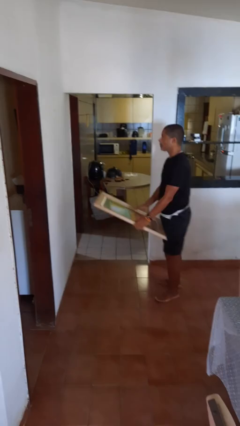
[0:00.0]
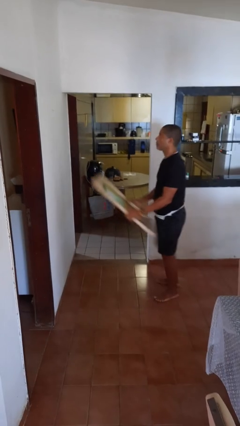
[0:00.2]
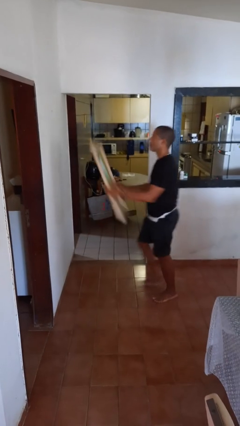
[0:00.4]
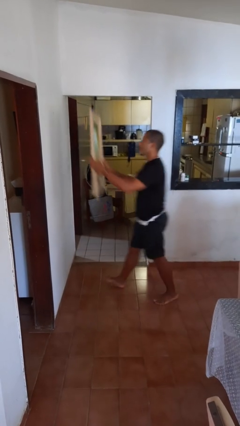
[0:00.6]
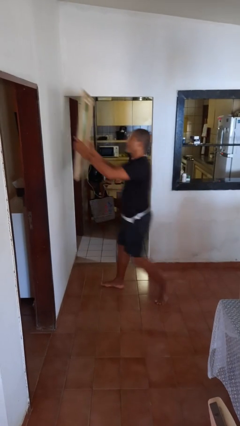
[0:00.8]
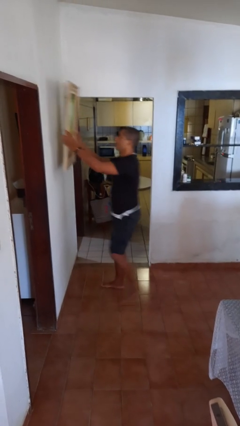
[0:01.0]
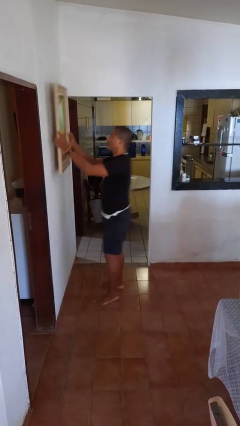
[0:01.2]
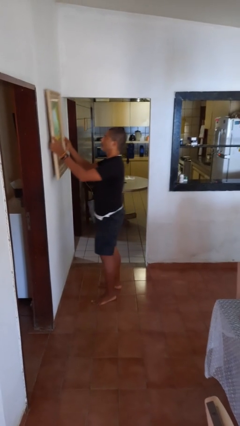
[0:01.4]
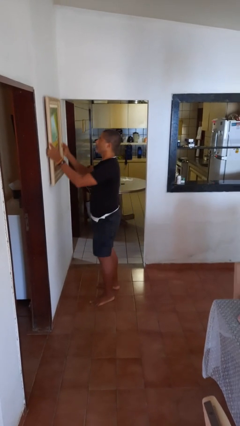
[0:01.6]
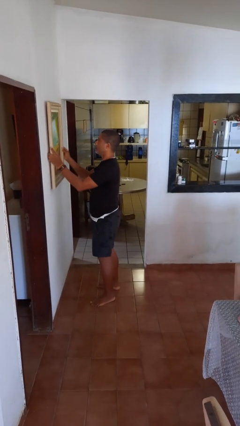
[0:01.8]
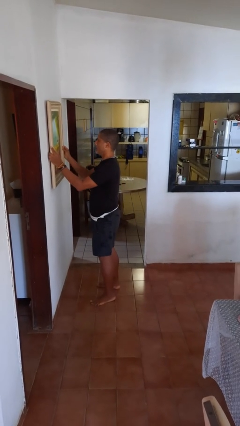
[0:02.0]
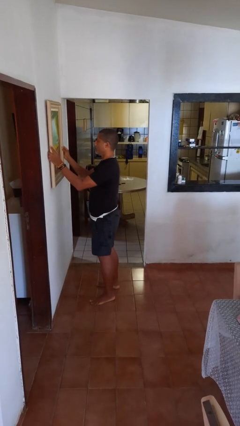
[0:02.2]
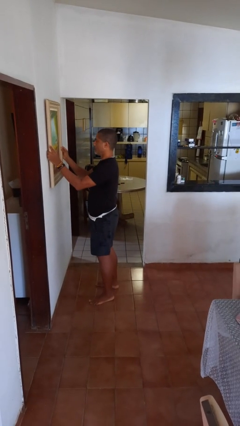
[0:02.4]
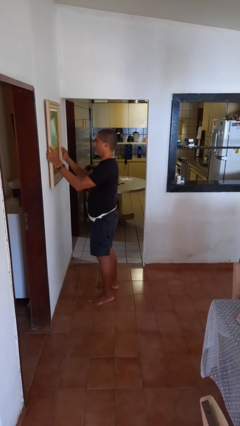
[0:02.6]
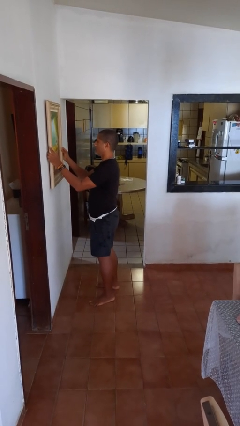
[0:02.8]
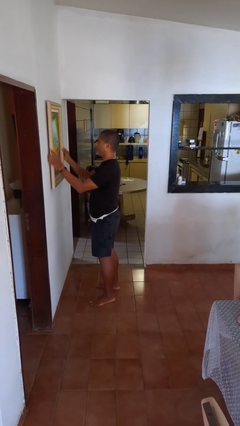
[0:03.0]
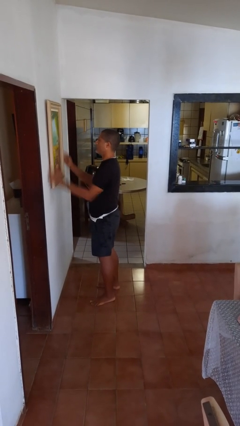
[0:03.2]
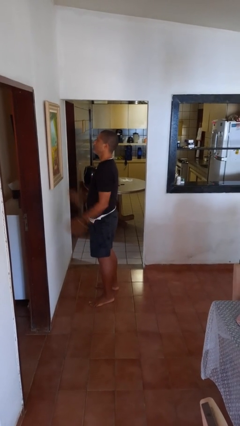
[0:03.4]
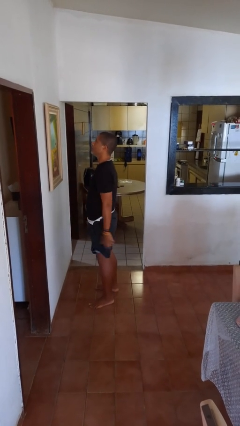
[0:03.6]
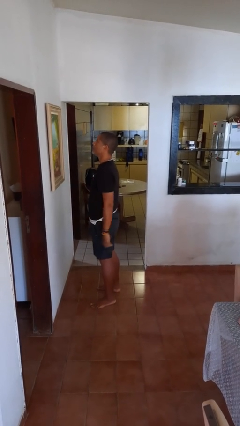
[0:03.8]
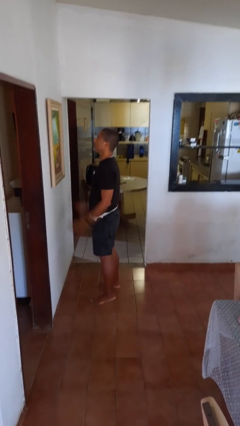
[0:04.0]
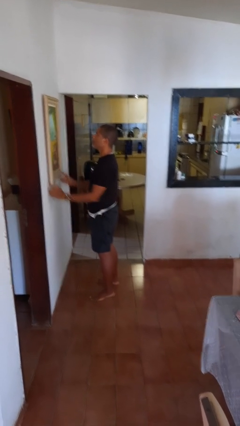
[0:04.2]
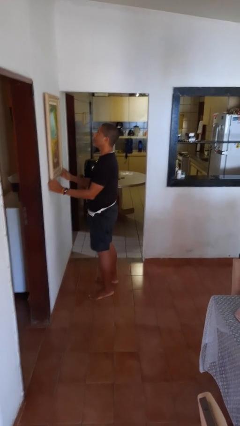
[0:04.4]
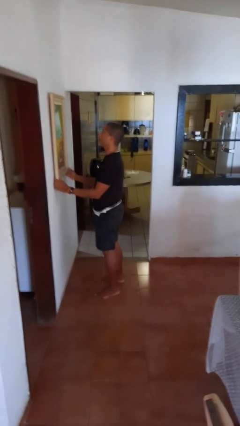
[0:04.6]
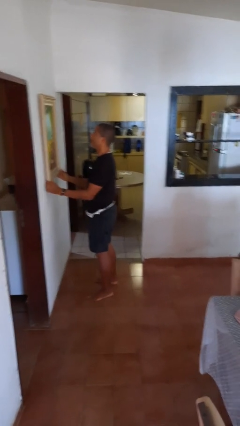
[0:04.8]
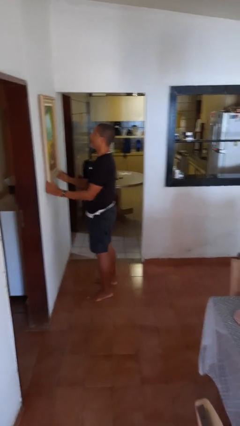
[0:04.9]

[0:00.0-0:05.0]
person puts up picture frame

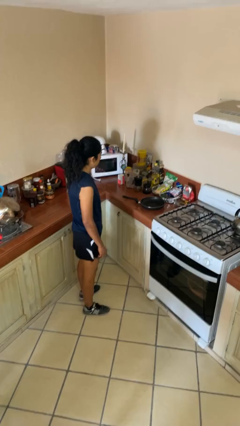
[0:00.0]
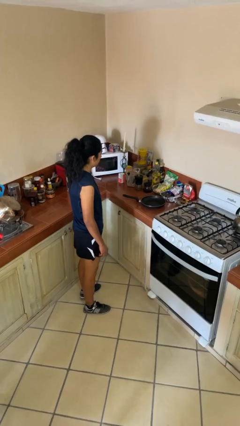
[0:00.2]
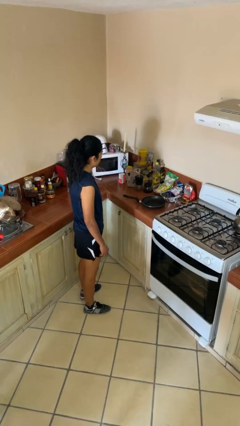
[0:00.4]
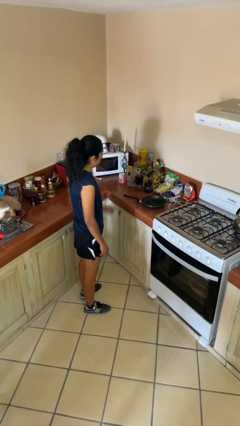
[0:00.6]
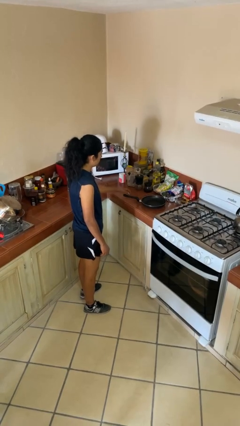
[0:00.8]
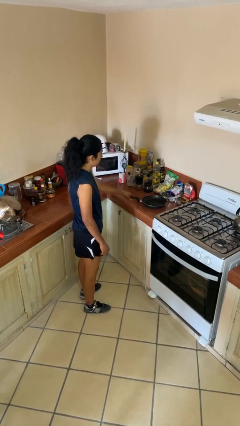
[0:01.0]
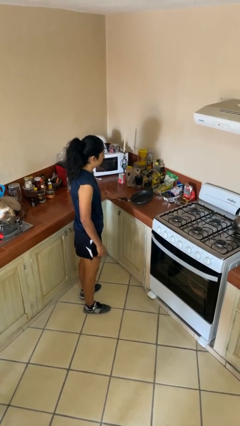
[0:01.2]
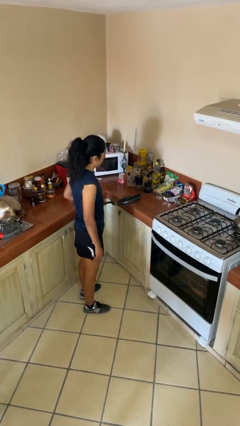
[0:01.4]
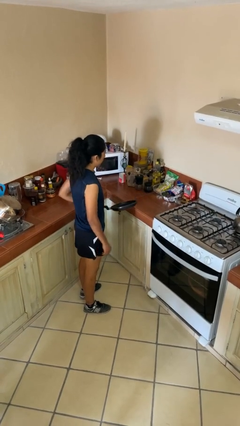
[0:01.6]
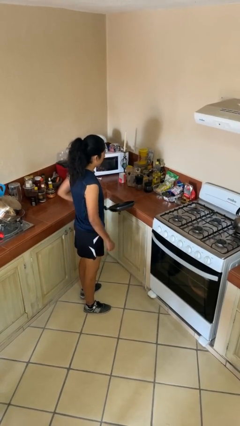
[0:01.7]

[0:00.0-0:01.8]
person picks up object from countertop

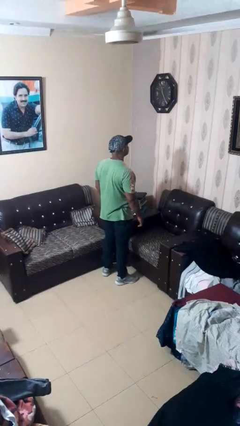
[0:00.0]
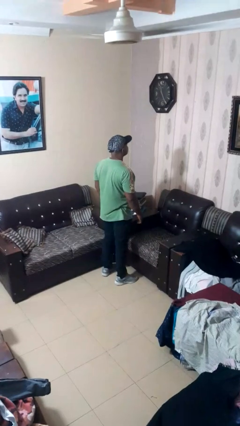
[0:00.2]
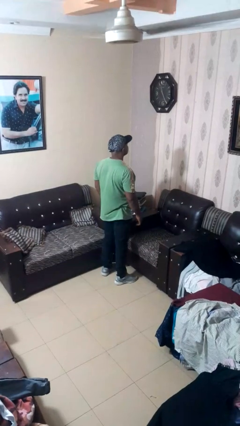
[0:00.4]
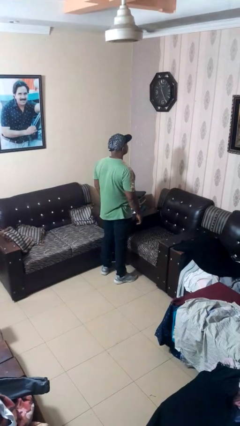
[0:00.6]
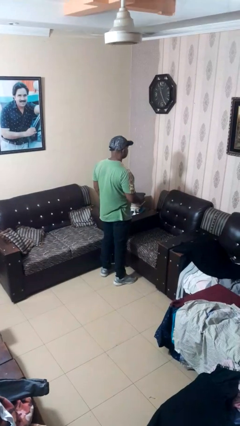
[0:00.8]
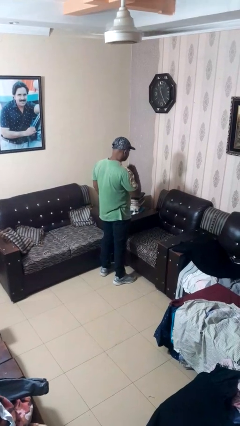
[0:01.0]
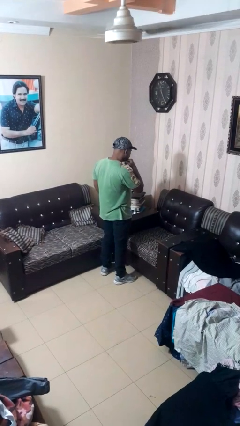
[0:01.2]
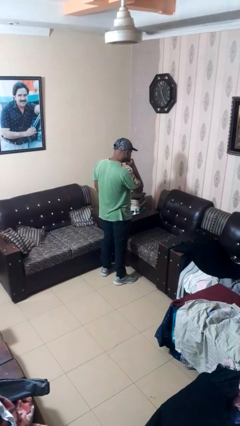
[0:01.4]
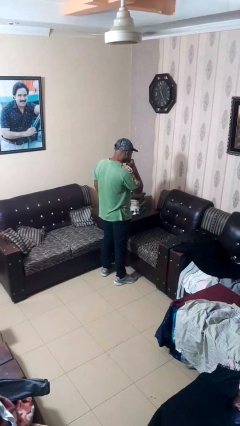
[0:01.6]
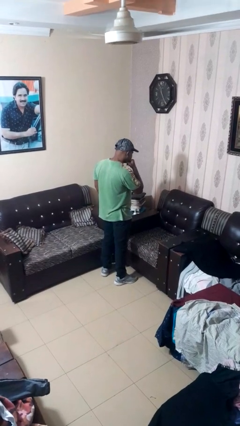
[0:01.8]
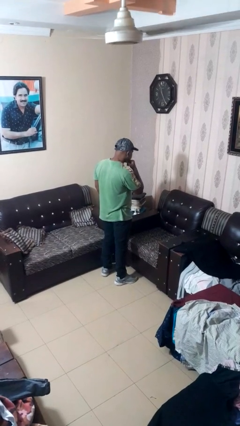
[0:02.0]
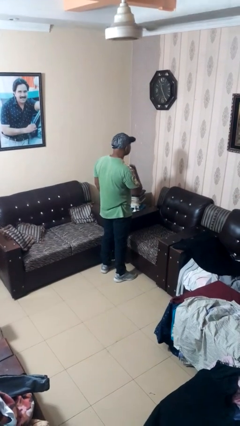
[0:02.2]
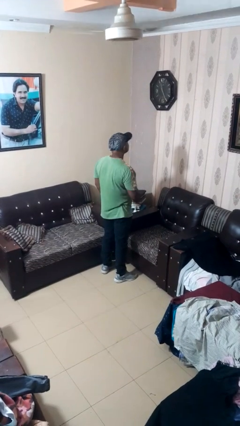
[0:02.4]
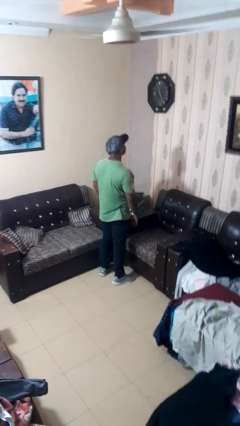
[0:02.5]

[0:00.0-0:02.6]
person strokes chin

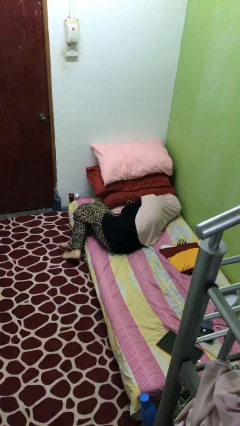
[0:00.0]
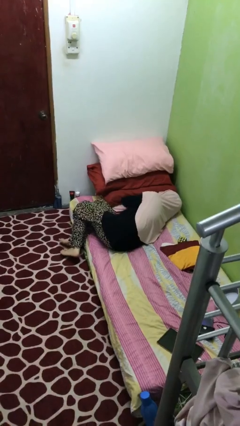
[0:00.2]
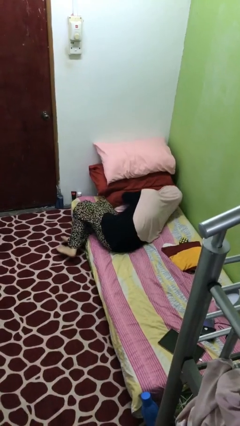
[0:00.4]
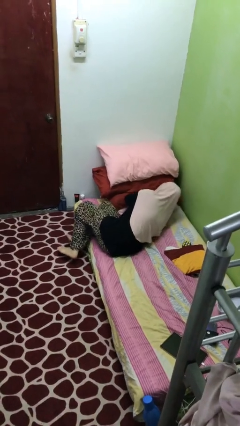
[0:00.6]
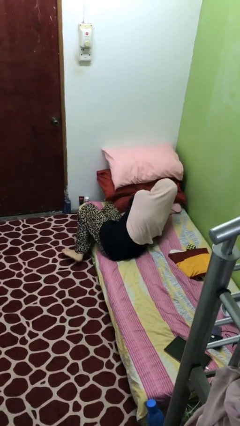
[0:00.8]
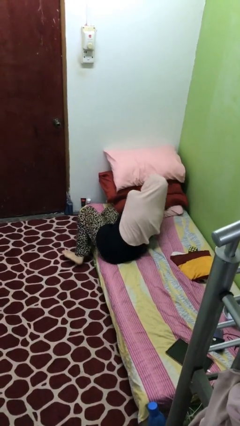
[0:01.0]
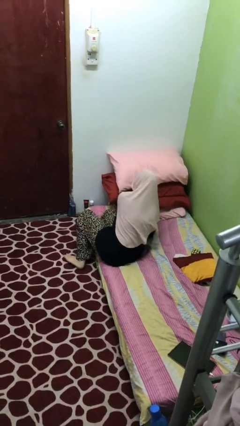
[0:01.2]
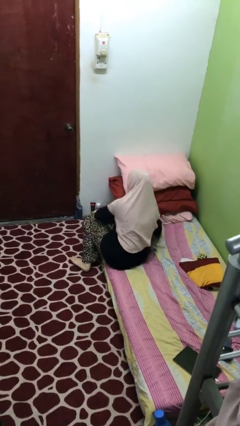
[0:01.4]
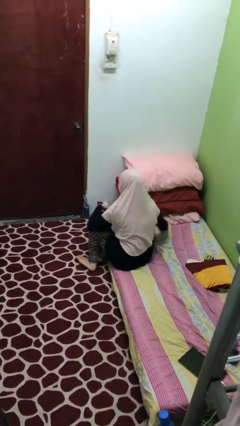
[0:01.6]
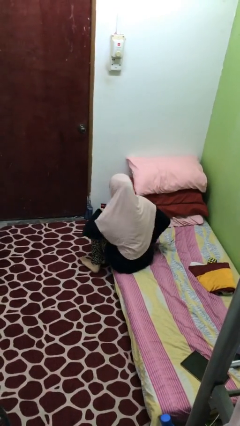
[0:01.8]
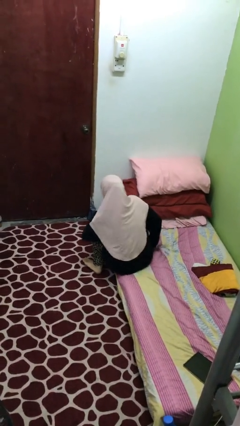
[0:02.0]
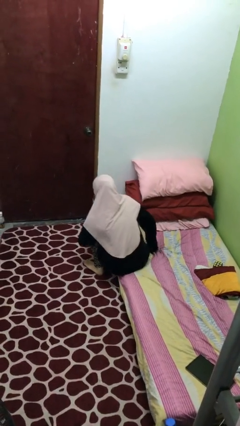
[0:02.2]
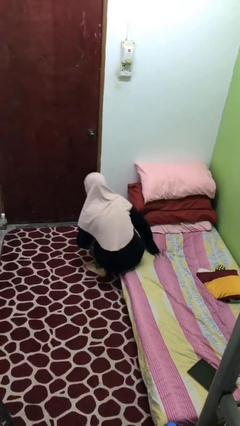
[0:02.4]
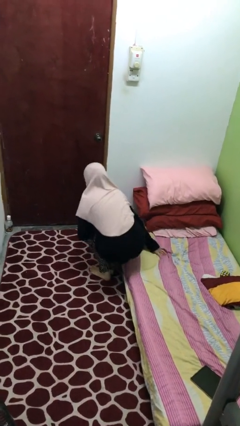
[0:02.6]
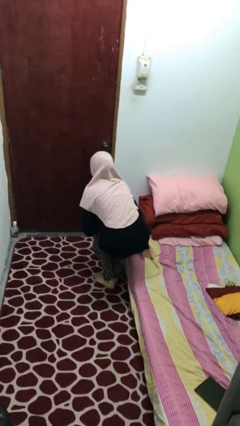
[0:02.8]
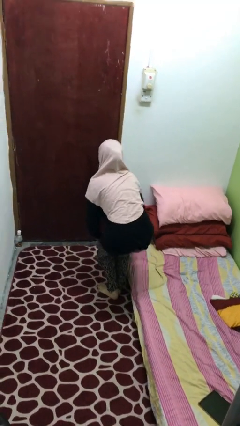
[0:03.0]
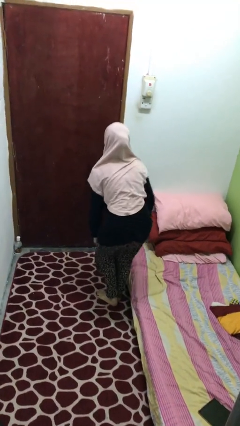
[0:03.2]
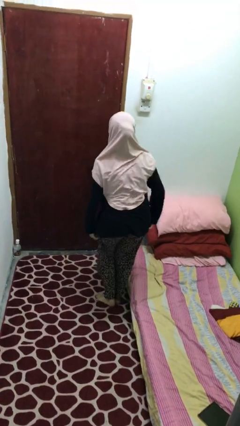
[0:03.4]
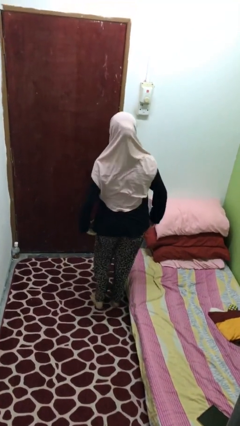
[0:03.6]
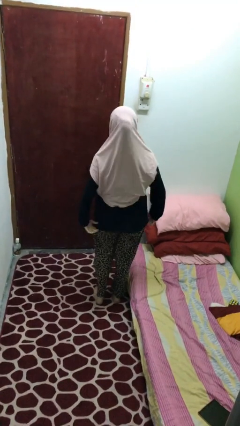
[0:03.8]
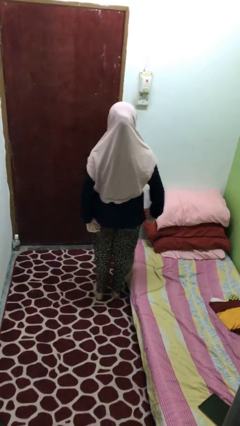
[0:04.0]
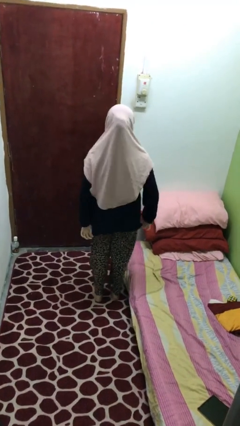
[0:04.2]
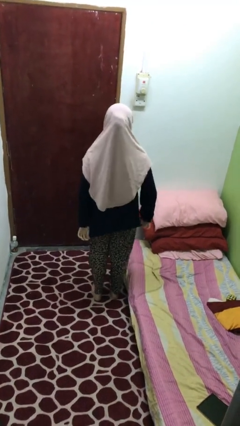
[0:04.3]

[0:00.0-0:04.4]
person stands up

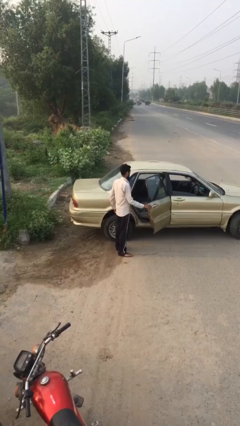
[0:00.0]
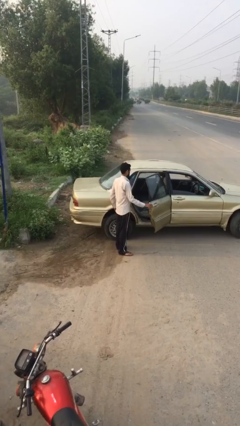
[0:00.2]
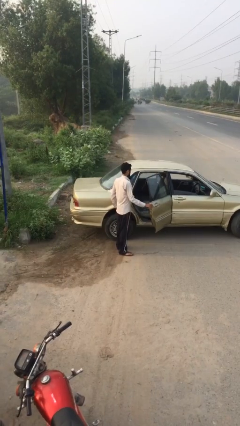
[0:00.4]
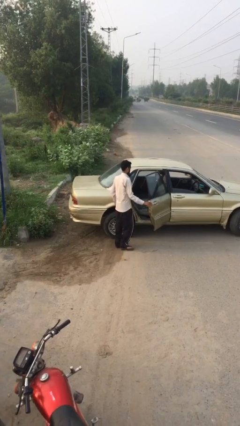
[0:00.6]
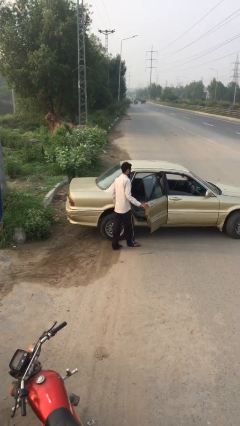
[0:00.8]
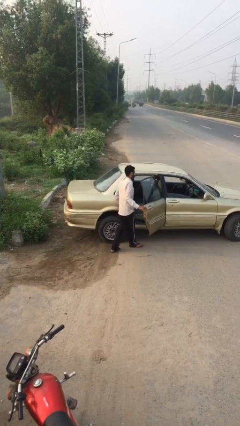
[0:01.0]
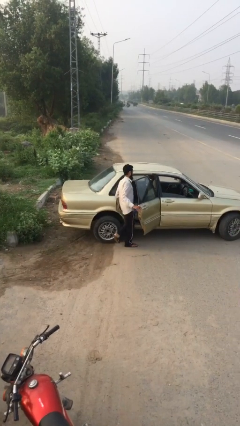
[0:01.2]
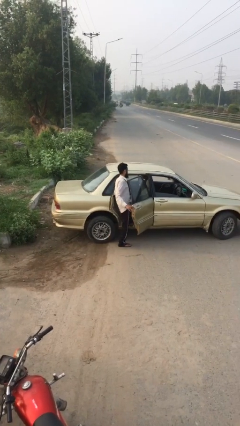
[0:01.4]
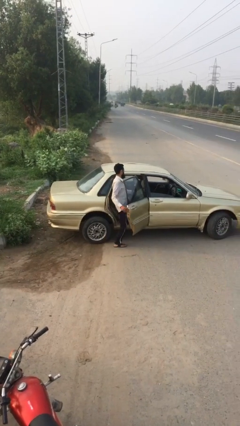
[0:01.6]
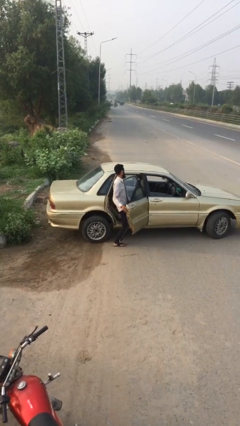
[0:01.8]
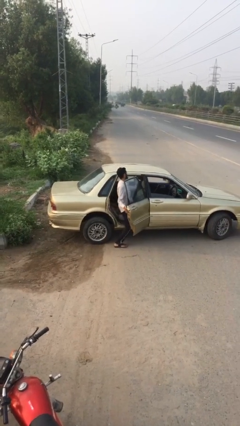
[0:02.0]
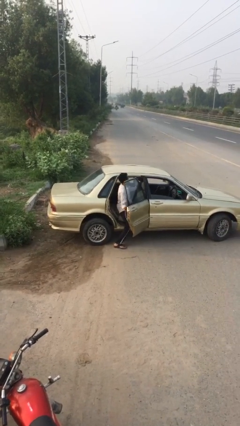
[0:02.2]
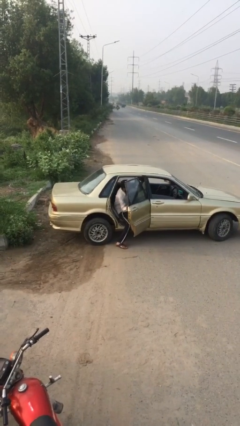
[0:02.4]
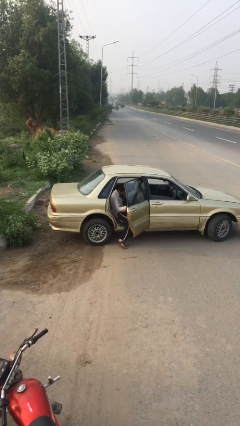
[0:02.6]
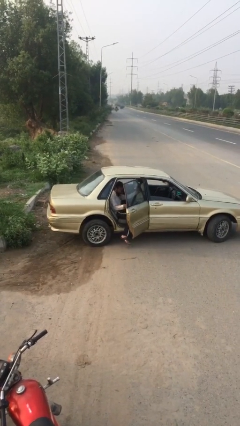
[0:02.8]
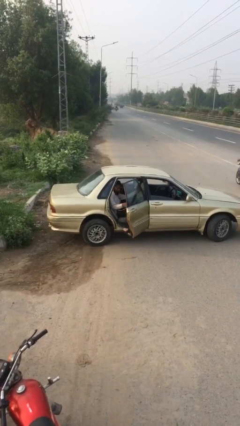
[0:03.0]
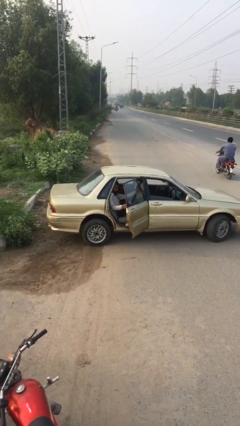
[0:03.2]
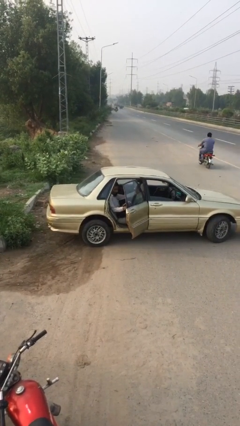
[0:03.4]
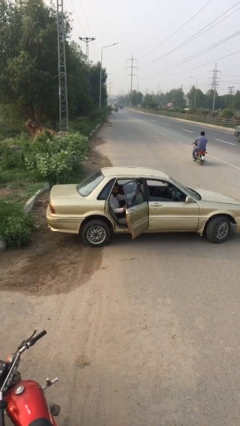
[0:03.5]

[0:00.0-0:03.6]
person enters car
